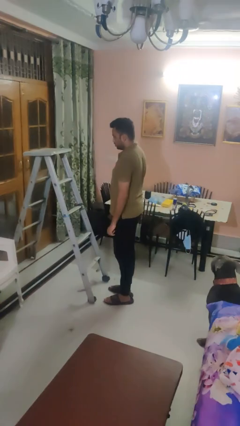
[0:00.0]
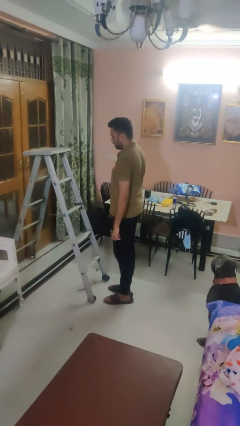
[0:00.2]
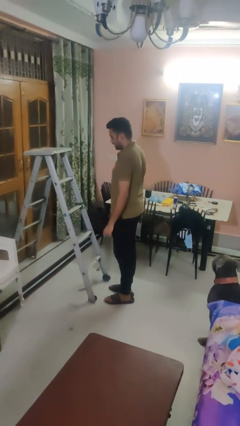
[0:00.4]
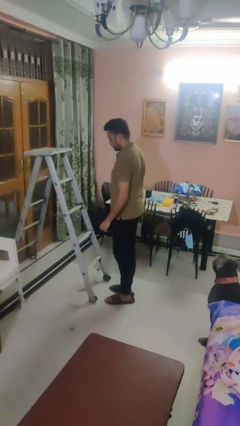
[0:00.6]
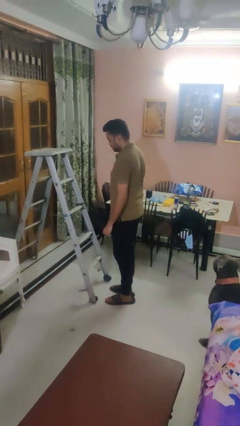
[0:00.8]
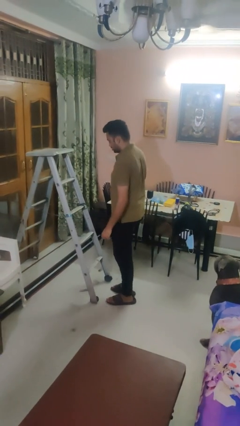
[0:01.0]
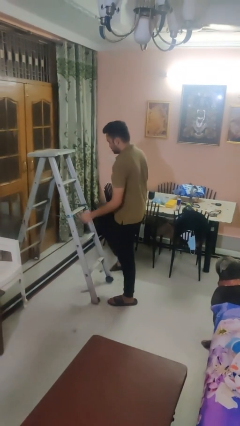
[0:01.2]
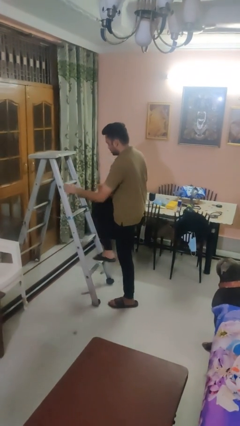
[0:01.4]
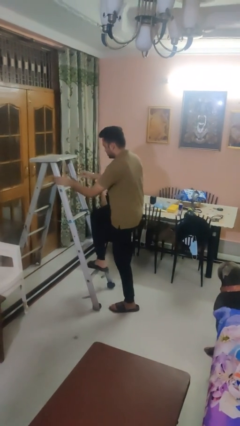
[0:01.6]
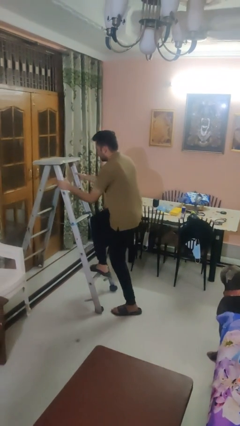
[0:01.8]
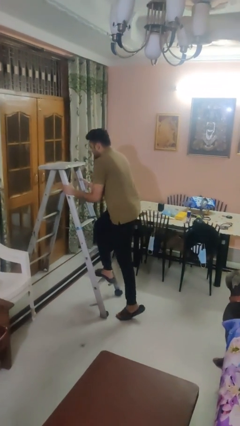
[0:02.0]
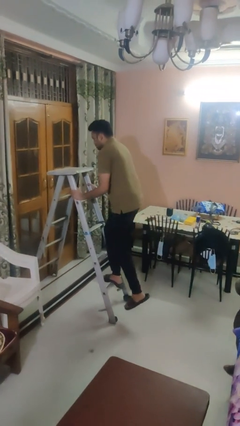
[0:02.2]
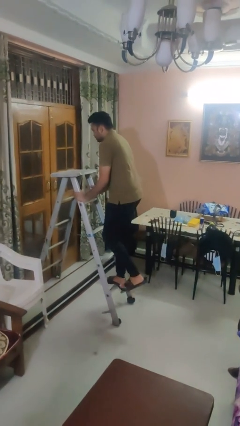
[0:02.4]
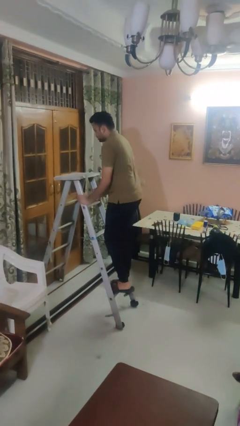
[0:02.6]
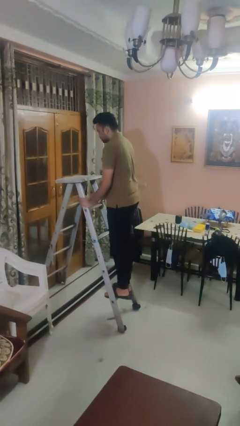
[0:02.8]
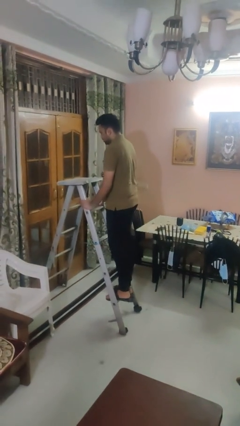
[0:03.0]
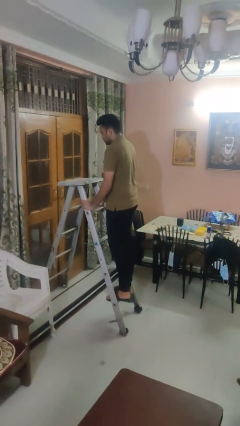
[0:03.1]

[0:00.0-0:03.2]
person climbs up ladder

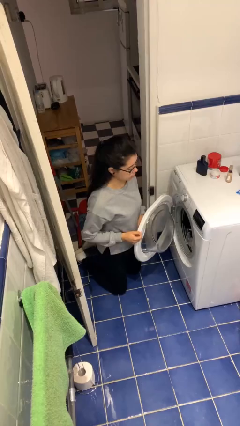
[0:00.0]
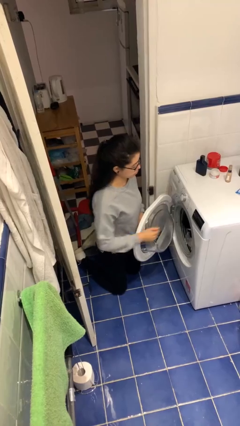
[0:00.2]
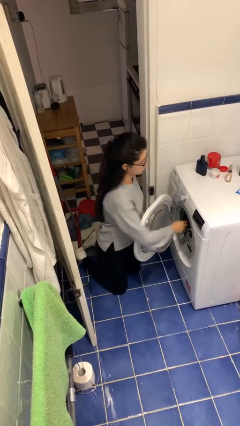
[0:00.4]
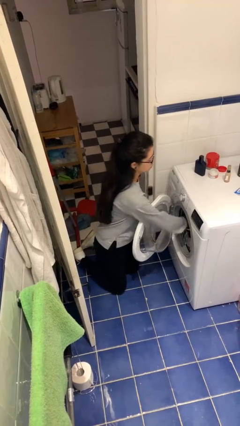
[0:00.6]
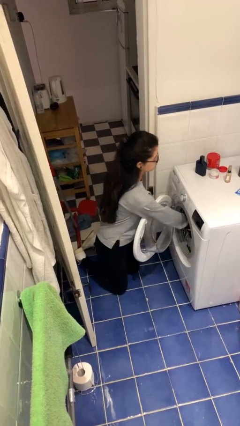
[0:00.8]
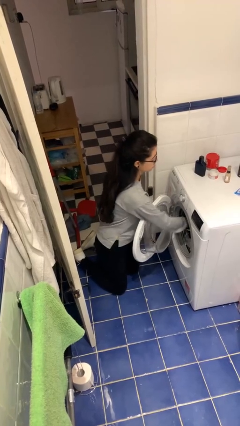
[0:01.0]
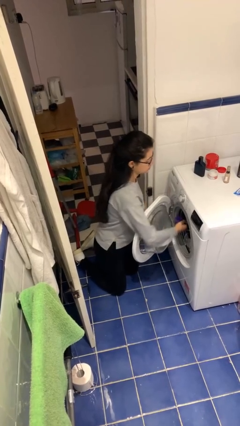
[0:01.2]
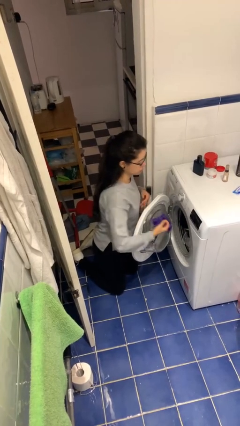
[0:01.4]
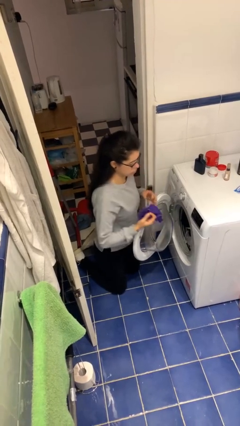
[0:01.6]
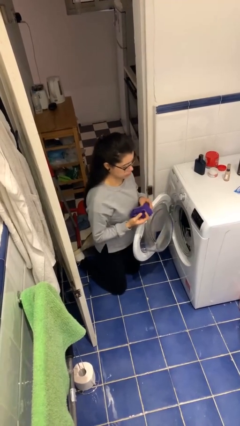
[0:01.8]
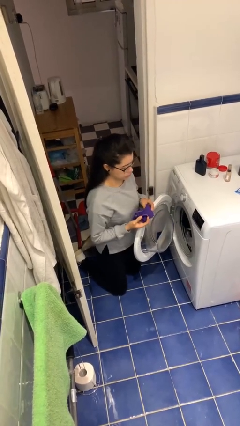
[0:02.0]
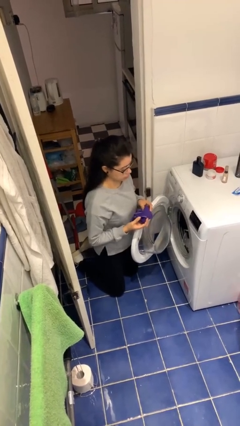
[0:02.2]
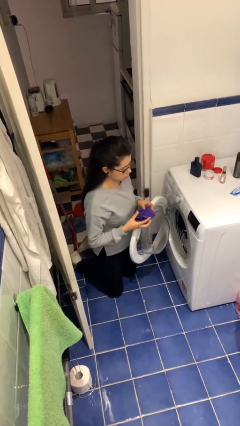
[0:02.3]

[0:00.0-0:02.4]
person unloads clotheswasher

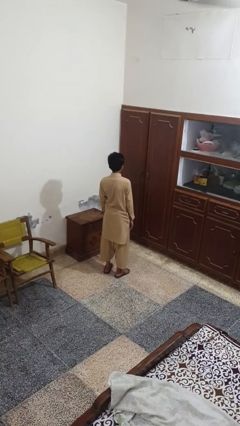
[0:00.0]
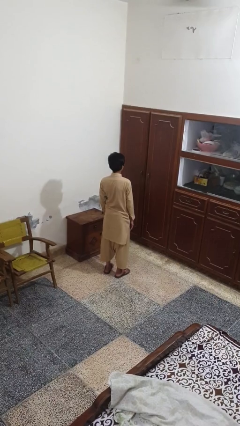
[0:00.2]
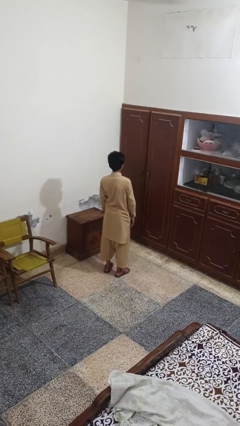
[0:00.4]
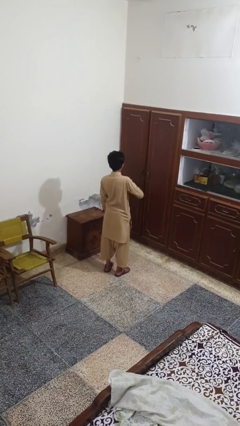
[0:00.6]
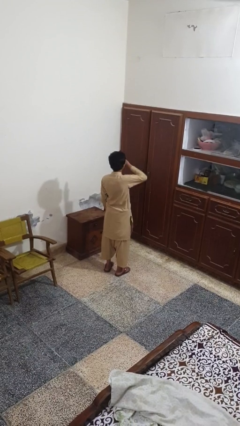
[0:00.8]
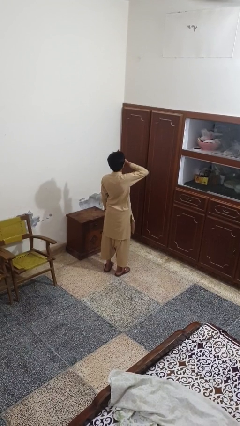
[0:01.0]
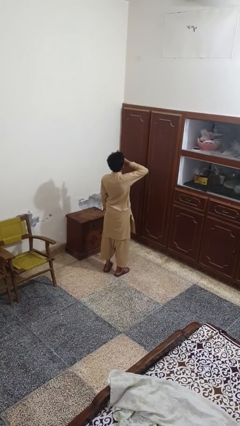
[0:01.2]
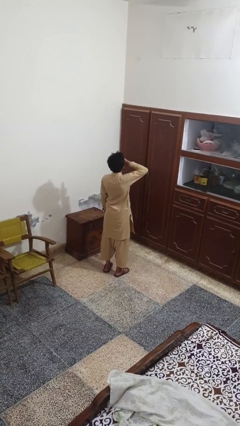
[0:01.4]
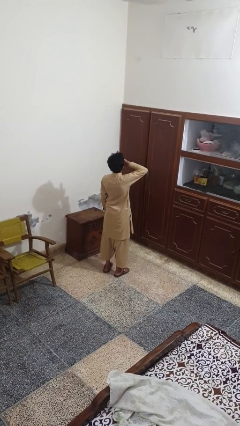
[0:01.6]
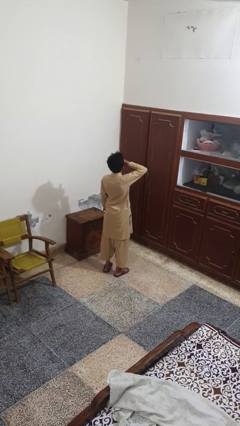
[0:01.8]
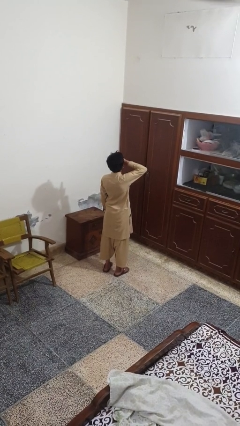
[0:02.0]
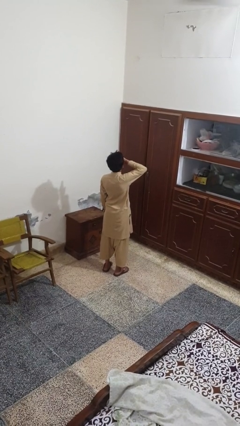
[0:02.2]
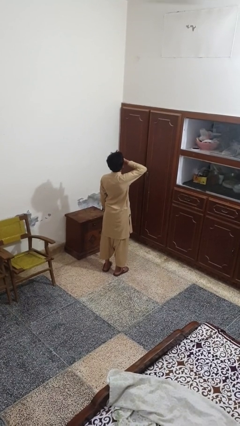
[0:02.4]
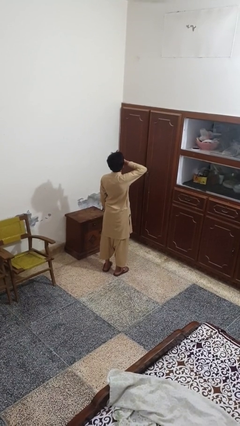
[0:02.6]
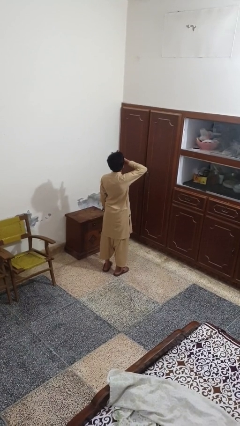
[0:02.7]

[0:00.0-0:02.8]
person yawns

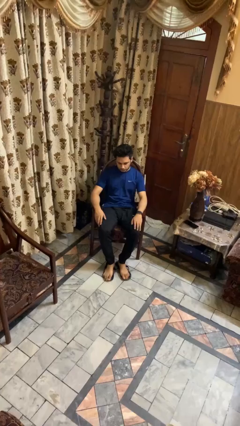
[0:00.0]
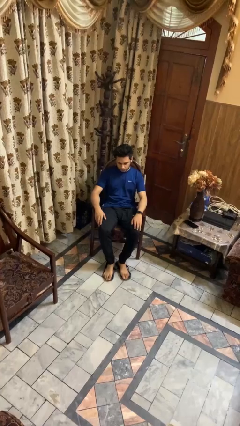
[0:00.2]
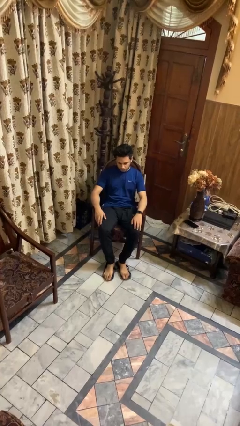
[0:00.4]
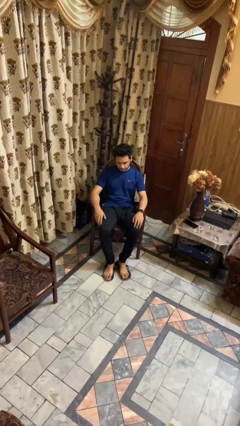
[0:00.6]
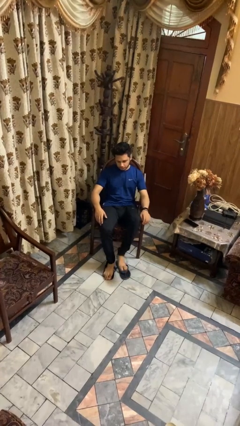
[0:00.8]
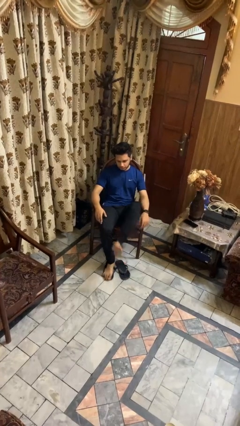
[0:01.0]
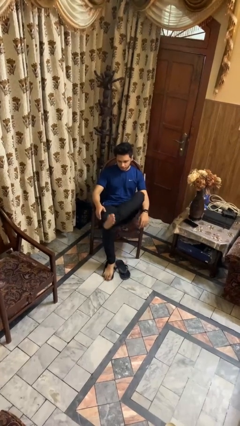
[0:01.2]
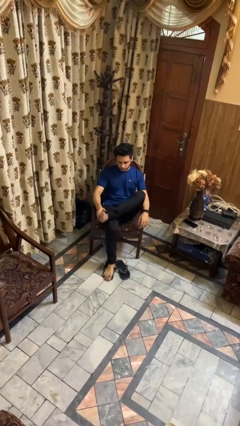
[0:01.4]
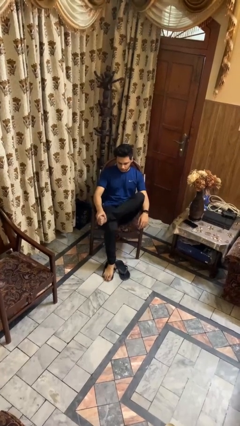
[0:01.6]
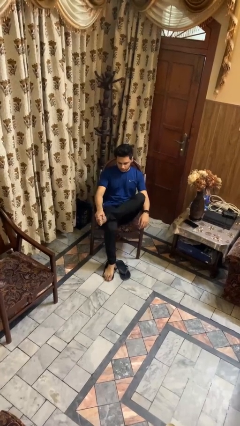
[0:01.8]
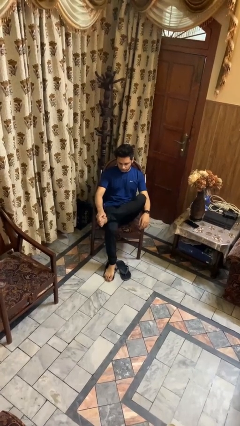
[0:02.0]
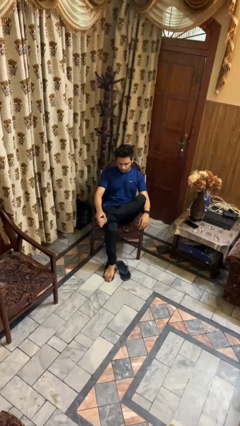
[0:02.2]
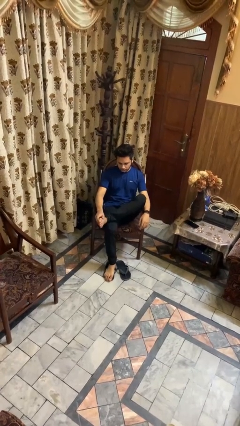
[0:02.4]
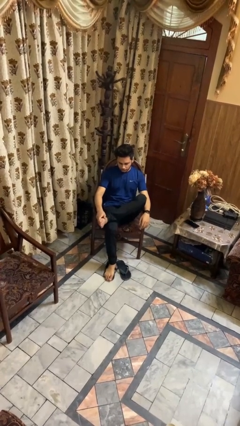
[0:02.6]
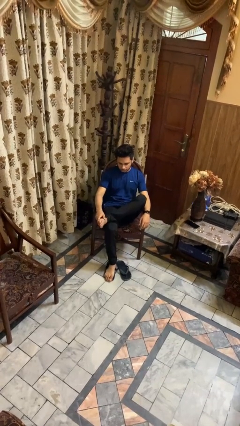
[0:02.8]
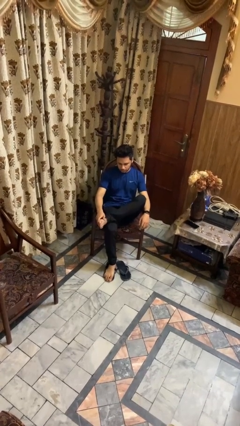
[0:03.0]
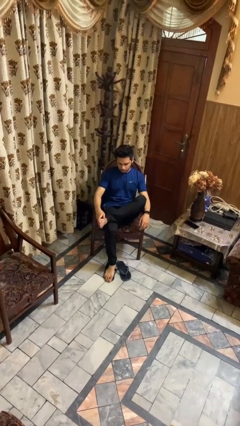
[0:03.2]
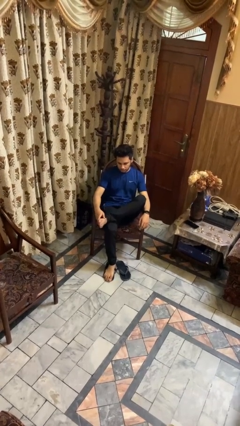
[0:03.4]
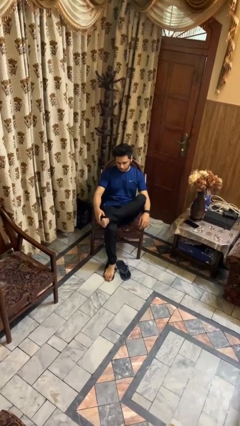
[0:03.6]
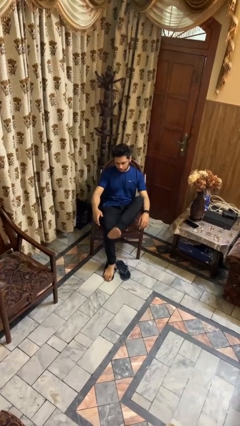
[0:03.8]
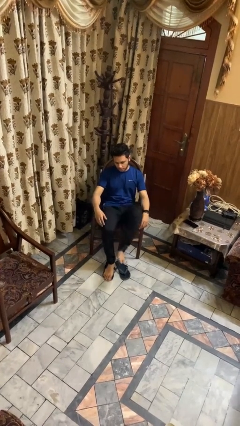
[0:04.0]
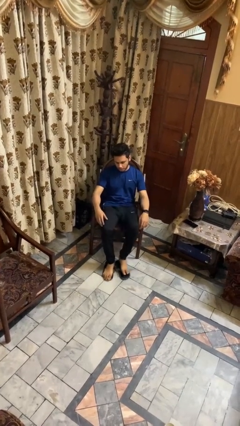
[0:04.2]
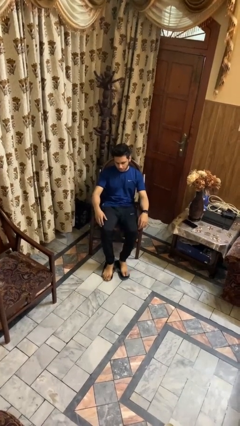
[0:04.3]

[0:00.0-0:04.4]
person rubs foot

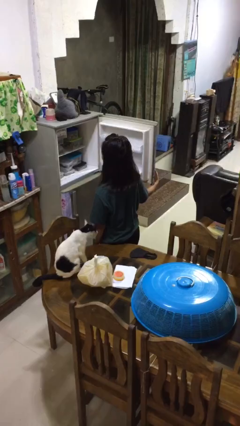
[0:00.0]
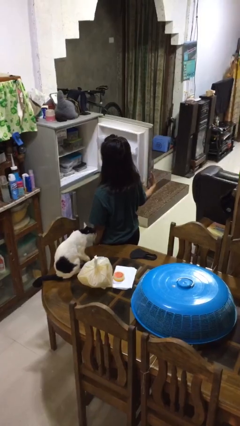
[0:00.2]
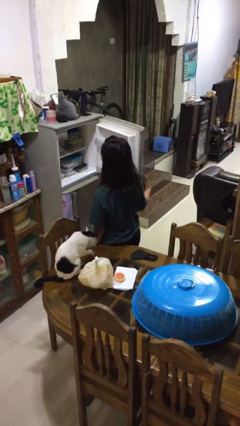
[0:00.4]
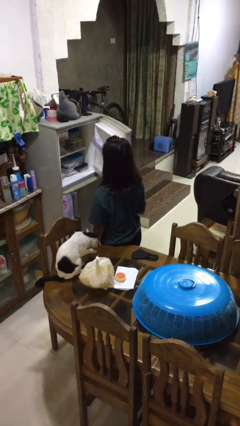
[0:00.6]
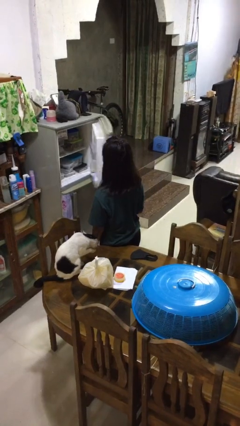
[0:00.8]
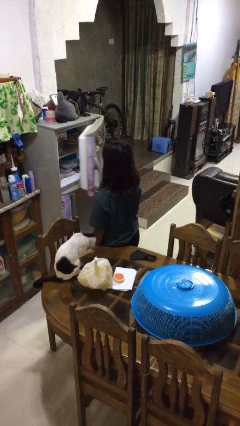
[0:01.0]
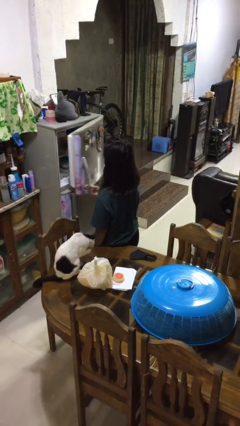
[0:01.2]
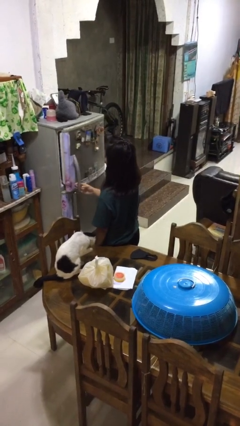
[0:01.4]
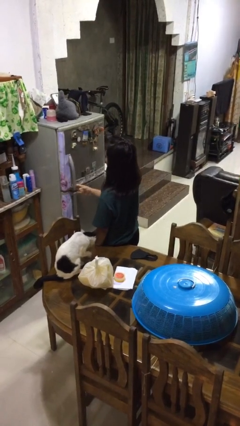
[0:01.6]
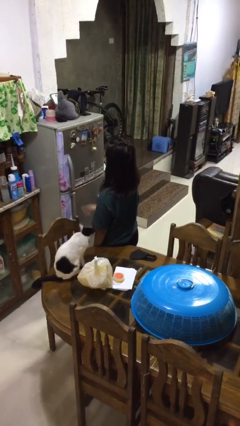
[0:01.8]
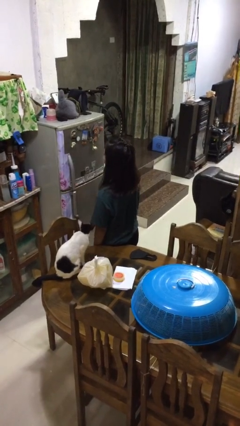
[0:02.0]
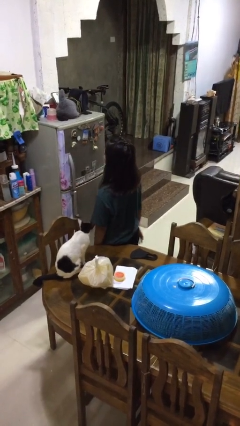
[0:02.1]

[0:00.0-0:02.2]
person closes refrigerator

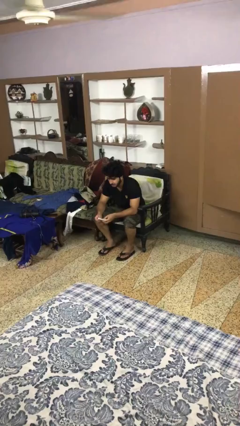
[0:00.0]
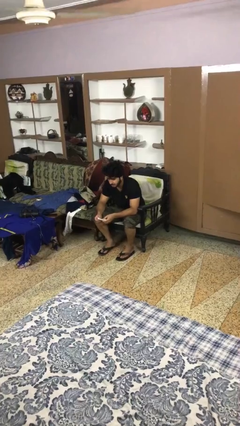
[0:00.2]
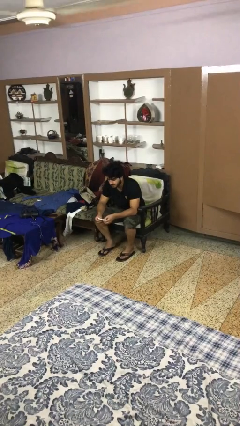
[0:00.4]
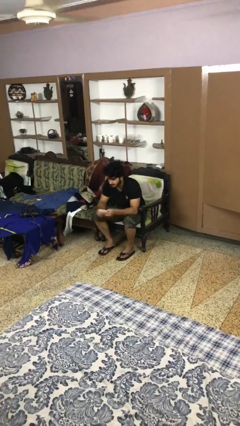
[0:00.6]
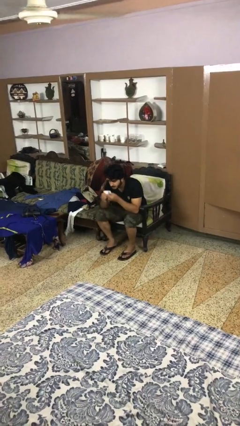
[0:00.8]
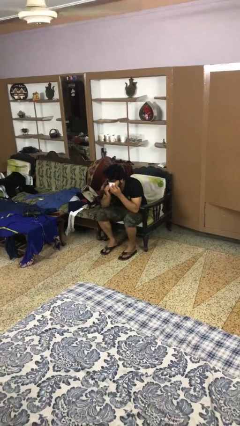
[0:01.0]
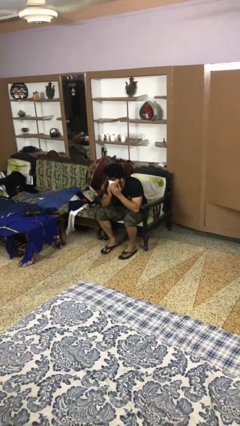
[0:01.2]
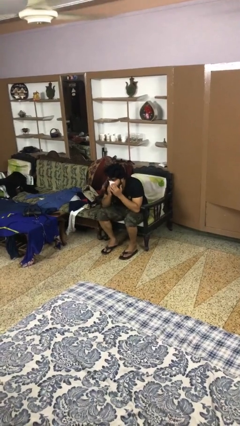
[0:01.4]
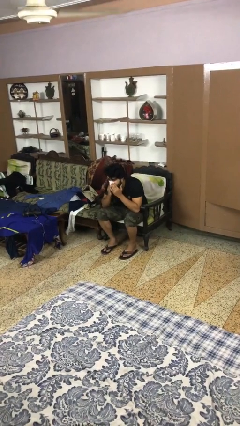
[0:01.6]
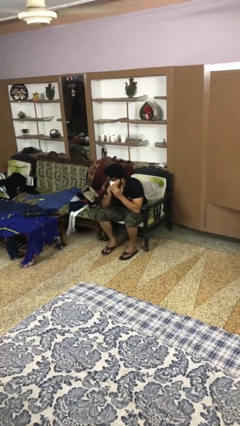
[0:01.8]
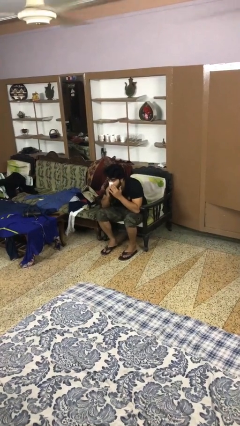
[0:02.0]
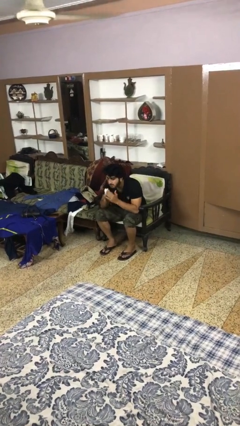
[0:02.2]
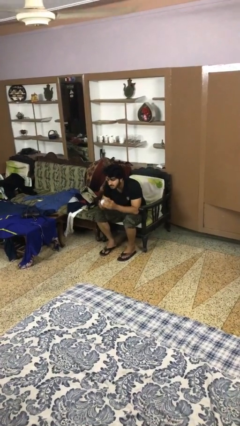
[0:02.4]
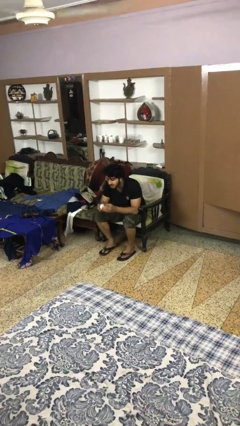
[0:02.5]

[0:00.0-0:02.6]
person blows nose

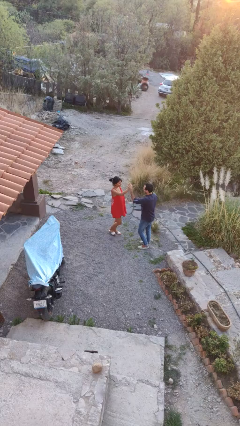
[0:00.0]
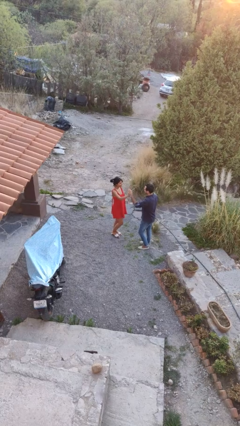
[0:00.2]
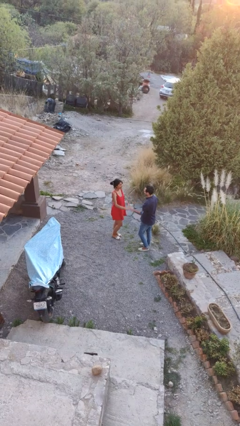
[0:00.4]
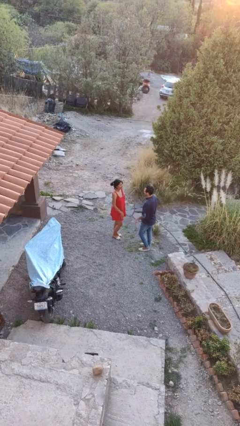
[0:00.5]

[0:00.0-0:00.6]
person highfives hand
